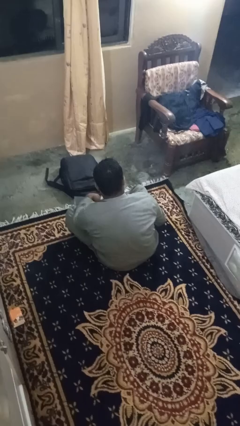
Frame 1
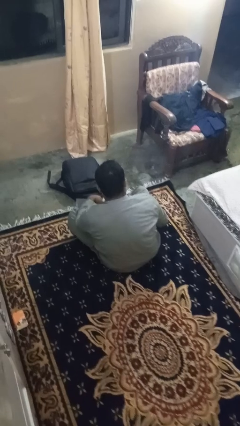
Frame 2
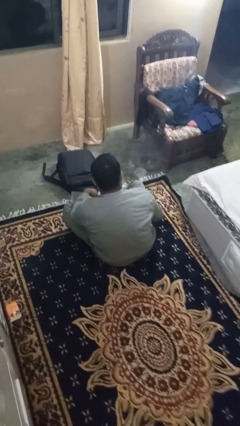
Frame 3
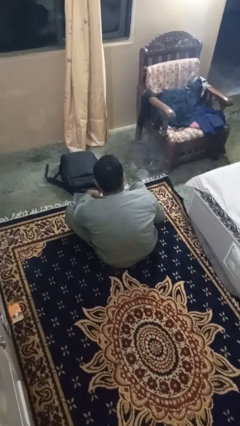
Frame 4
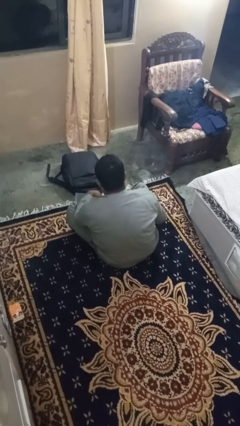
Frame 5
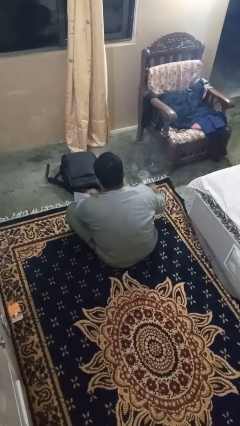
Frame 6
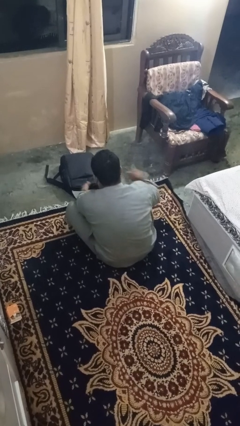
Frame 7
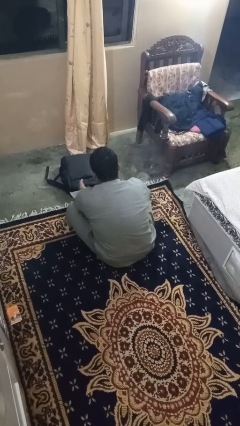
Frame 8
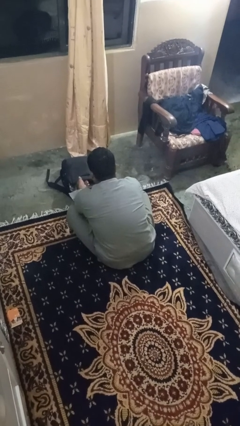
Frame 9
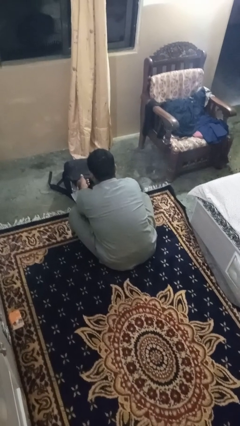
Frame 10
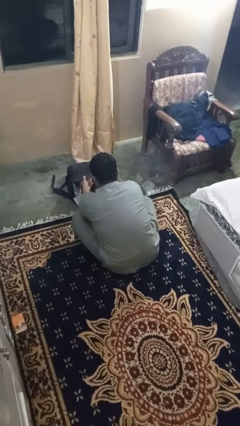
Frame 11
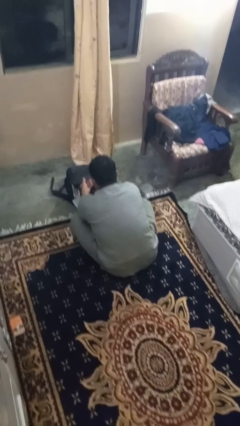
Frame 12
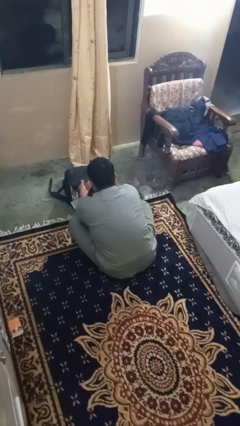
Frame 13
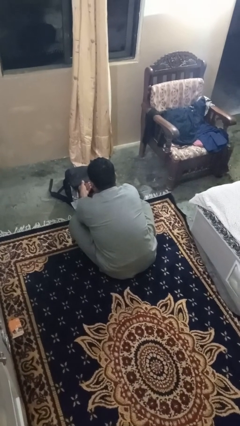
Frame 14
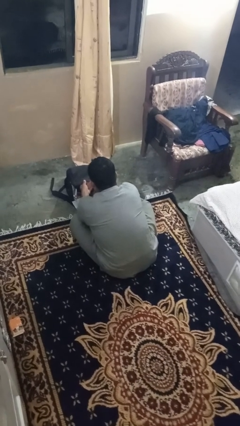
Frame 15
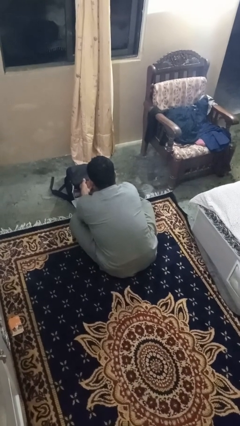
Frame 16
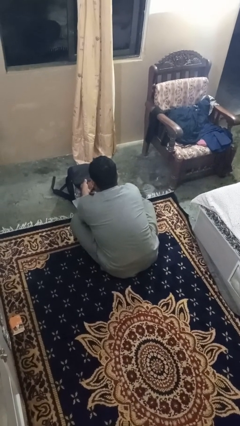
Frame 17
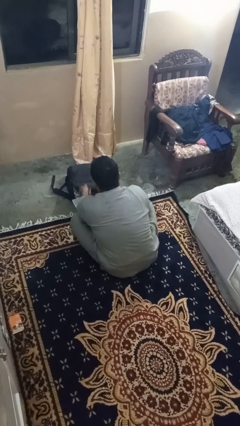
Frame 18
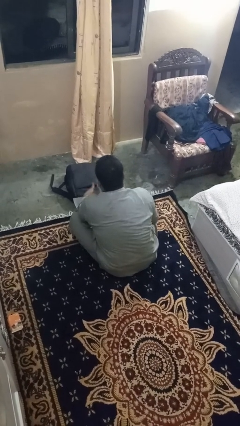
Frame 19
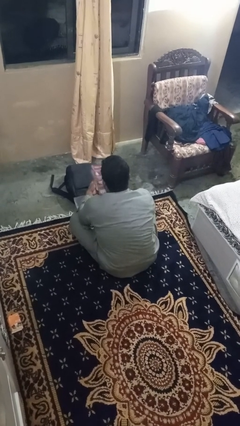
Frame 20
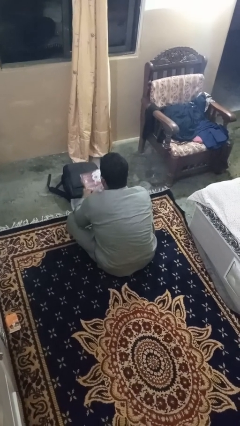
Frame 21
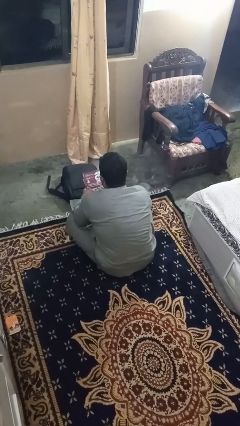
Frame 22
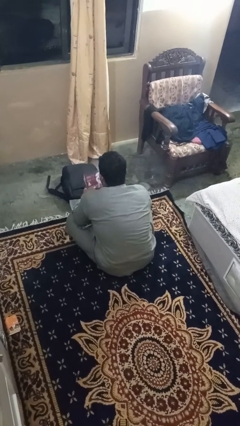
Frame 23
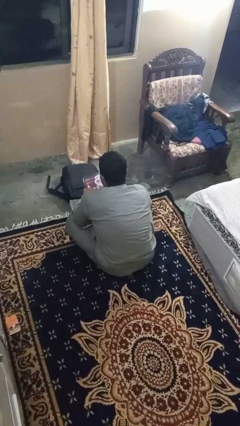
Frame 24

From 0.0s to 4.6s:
person takes object from bag

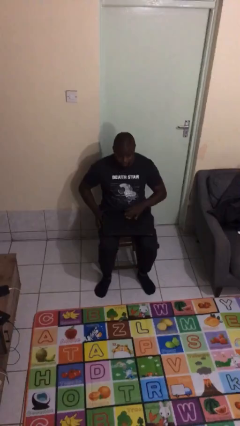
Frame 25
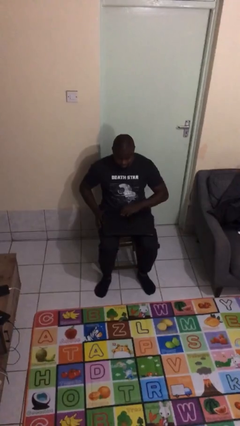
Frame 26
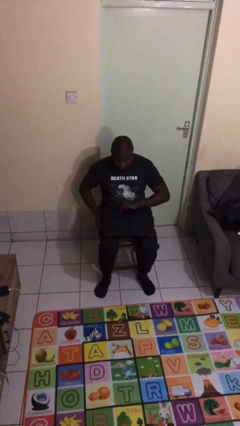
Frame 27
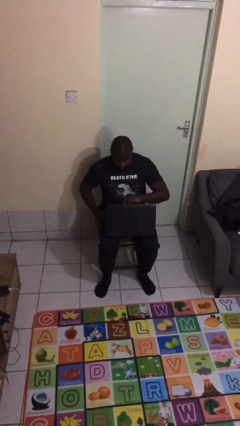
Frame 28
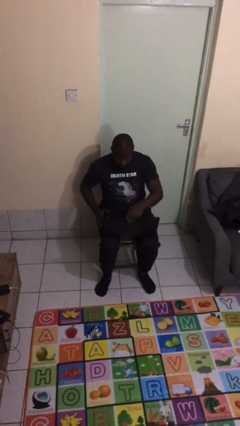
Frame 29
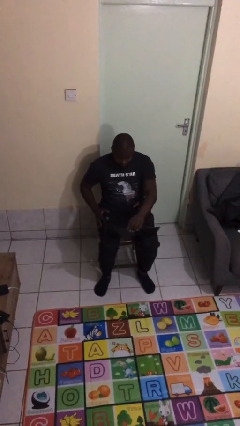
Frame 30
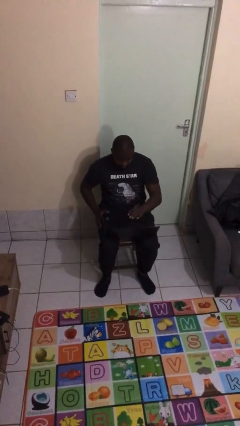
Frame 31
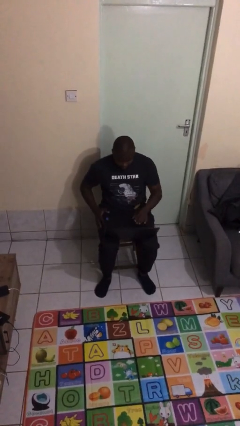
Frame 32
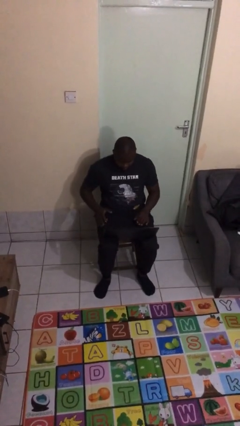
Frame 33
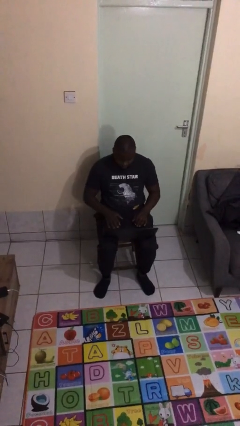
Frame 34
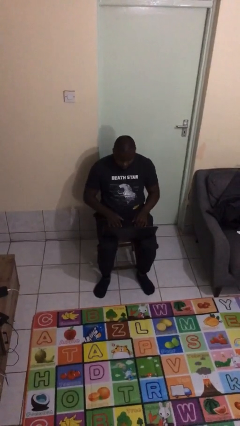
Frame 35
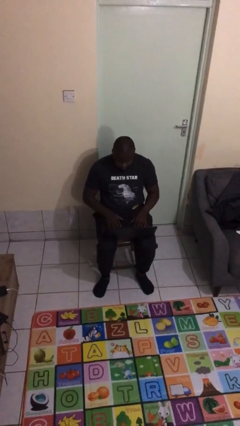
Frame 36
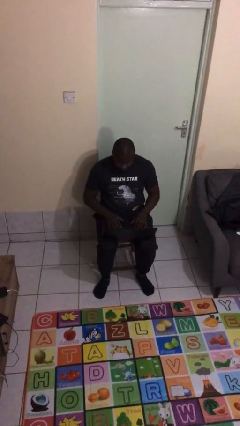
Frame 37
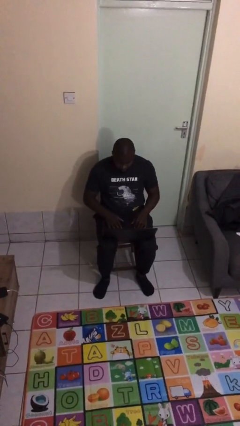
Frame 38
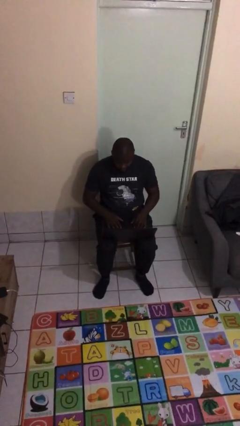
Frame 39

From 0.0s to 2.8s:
person opens laptop

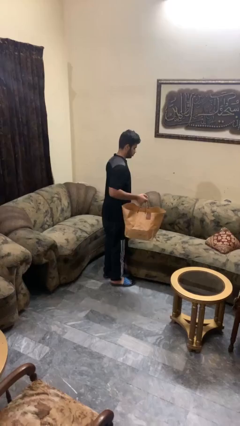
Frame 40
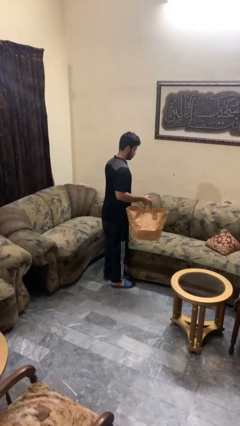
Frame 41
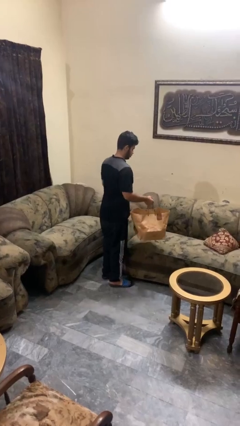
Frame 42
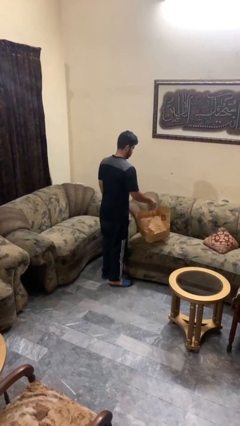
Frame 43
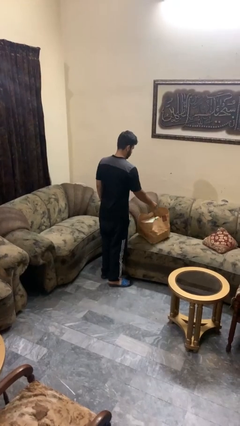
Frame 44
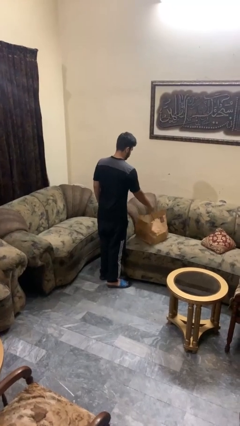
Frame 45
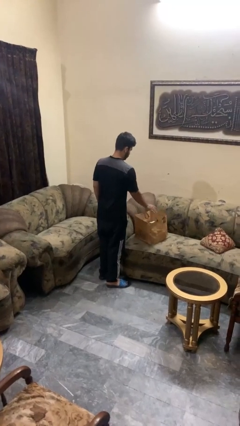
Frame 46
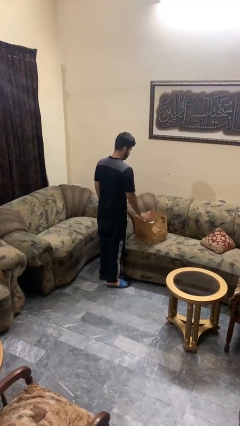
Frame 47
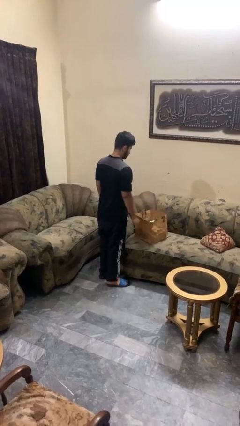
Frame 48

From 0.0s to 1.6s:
person puts down object on couch

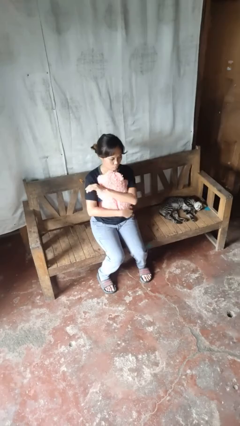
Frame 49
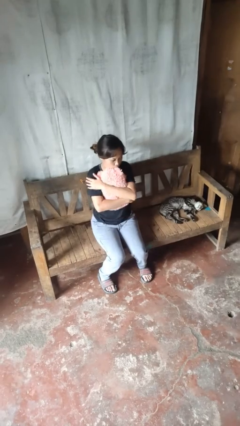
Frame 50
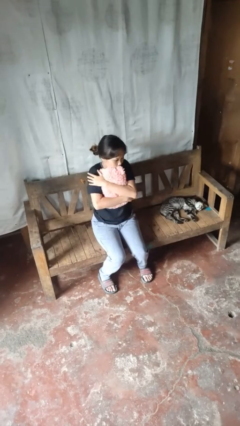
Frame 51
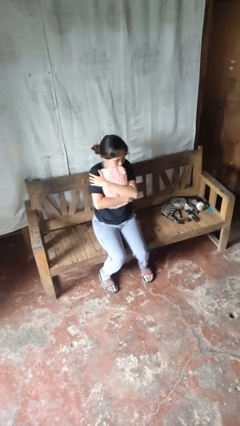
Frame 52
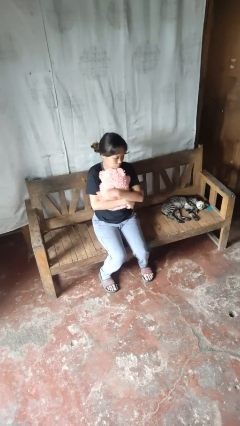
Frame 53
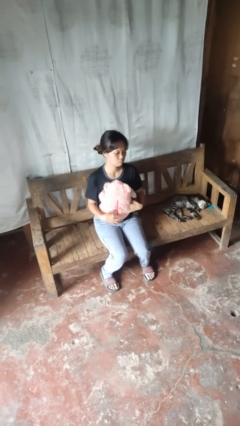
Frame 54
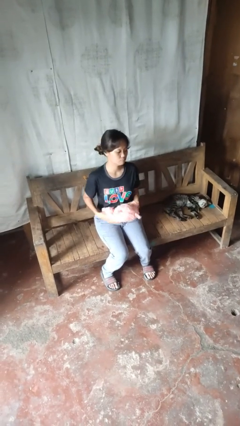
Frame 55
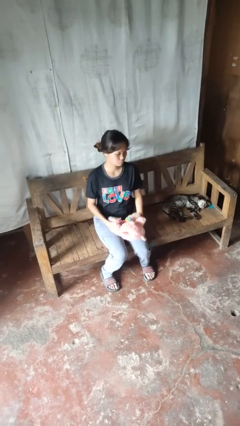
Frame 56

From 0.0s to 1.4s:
person hugs stuffed animal

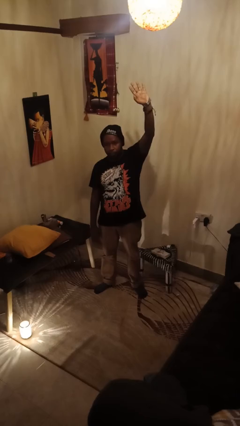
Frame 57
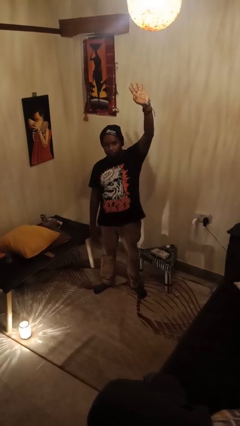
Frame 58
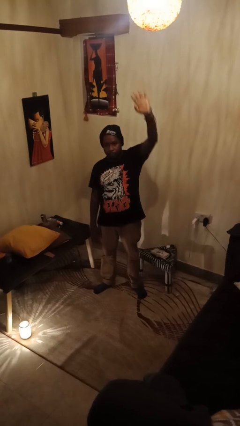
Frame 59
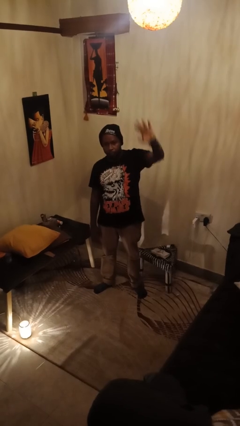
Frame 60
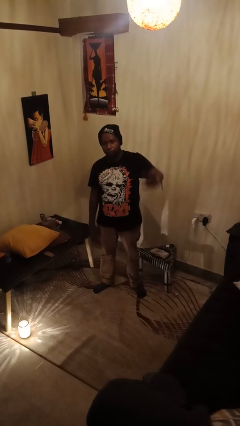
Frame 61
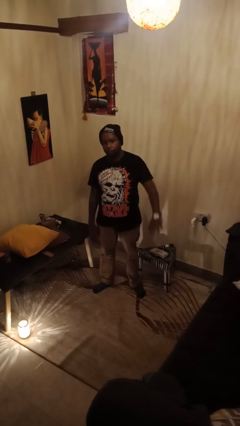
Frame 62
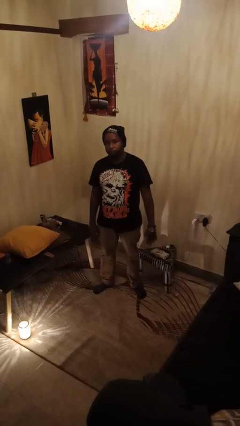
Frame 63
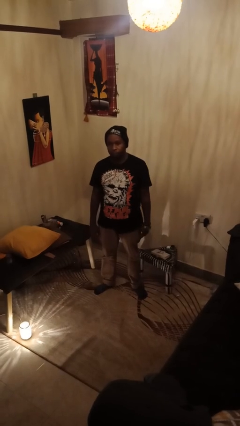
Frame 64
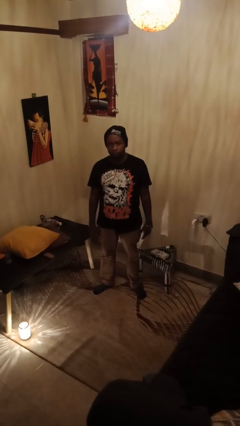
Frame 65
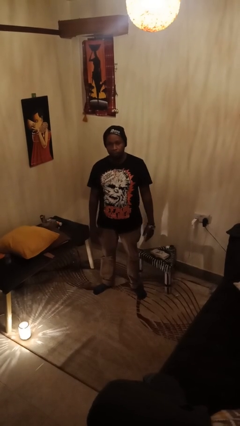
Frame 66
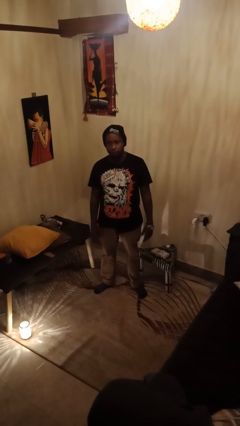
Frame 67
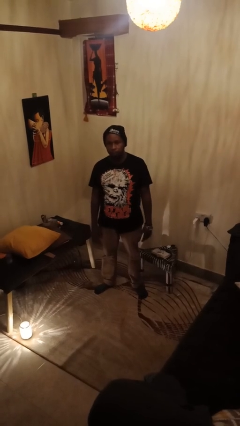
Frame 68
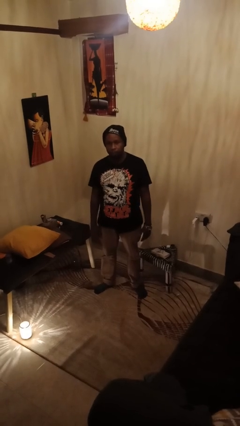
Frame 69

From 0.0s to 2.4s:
person gestures lower hand

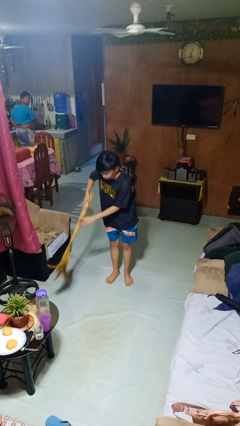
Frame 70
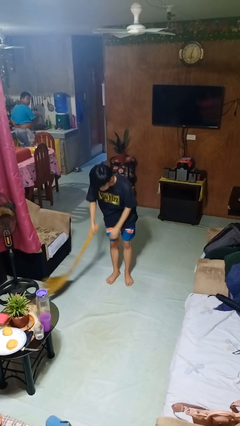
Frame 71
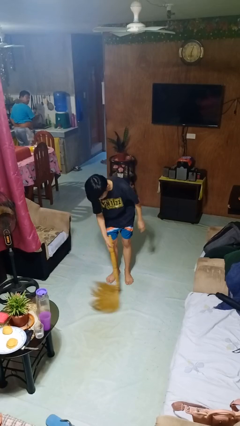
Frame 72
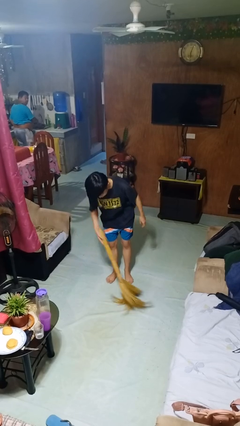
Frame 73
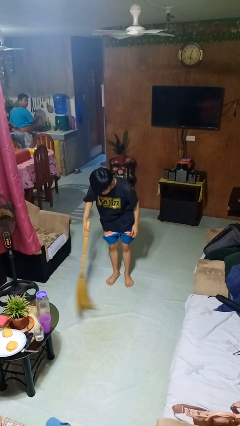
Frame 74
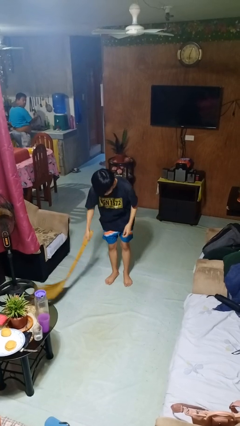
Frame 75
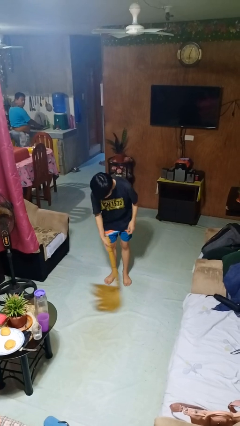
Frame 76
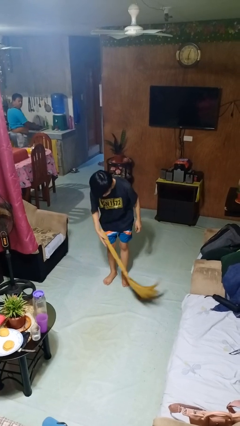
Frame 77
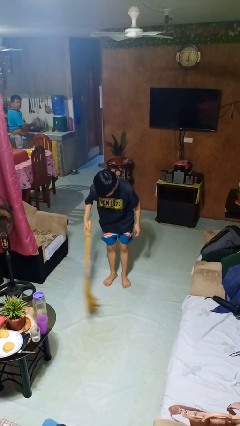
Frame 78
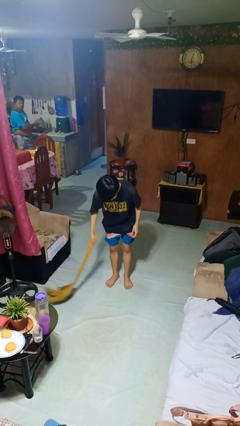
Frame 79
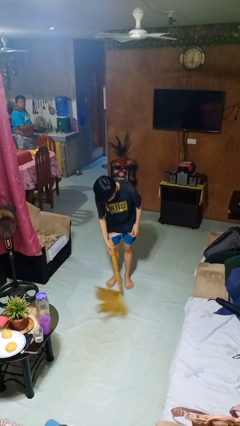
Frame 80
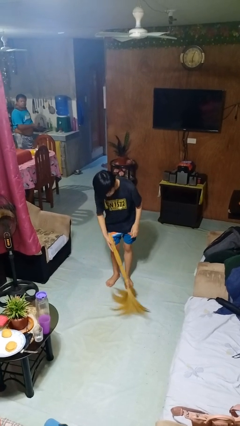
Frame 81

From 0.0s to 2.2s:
person sweeps floor

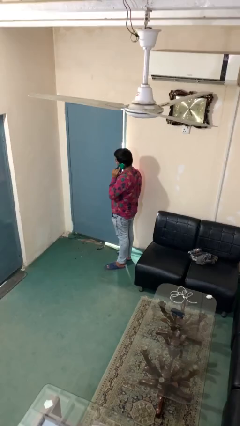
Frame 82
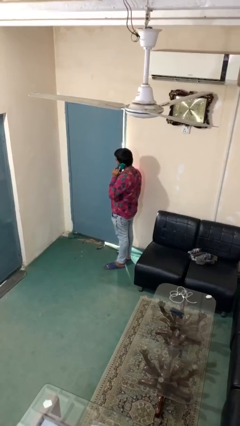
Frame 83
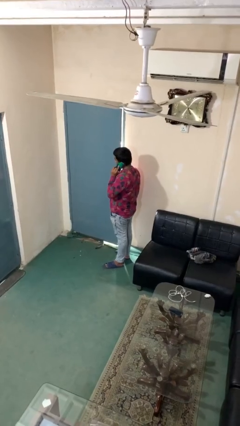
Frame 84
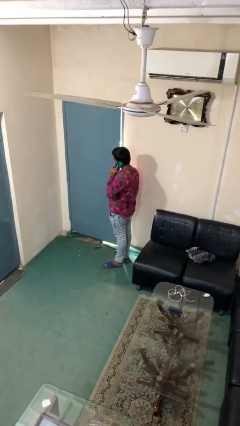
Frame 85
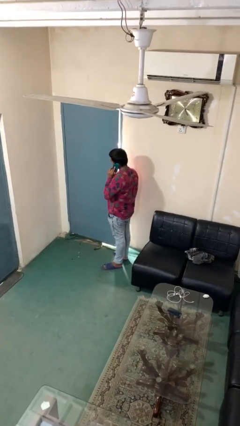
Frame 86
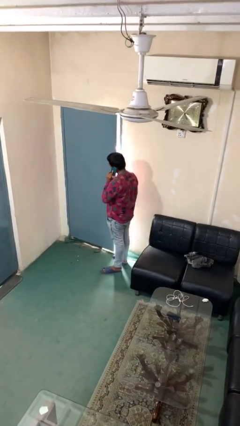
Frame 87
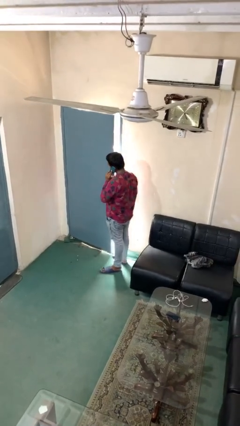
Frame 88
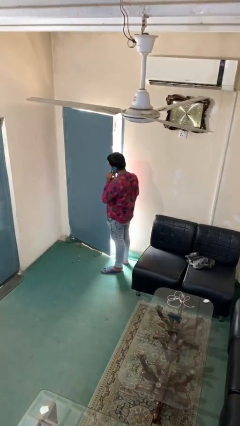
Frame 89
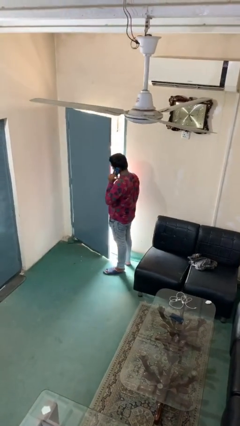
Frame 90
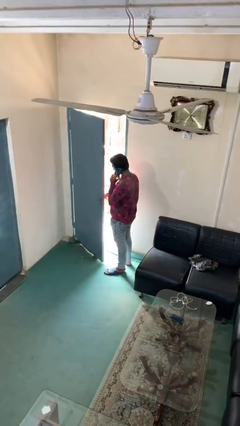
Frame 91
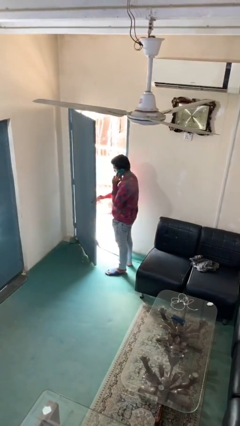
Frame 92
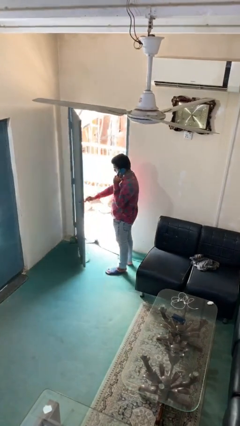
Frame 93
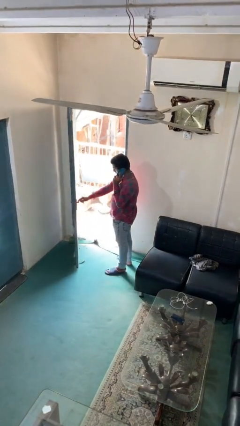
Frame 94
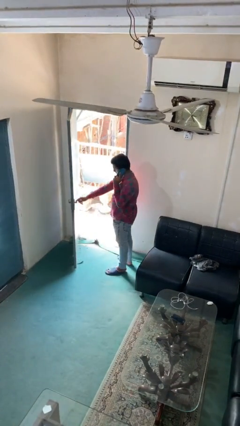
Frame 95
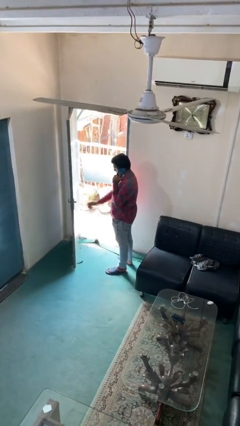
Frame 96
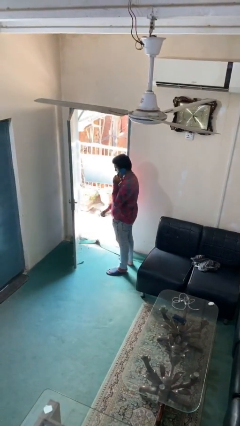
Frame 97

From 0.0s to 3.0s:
person opens facility door
